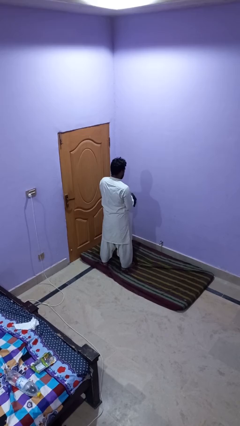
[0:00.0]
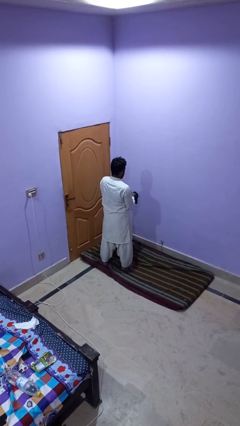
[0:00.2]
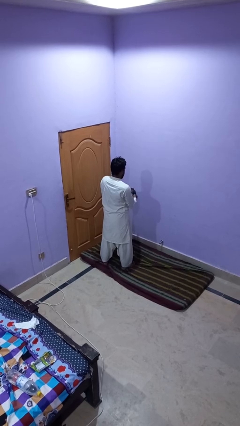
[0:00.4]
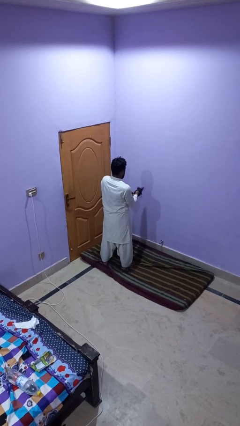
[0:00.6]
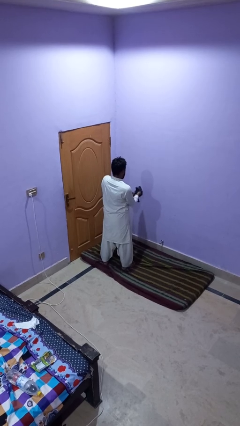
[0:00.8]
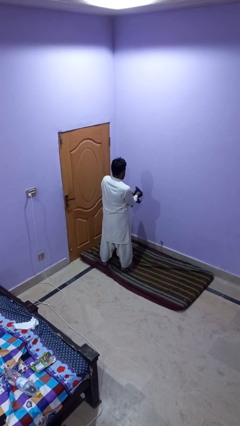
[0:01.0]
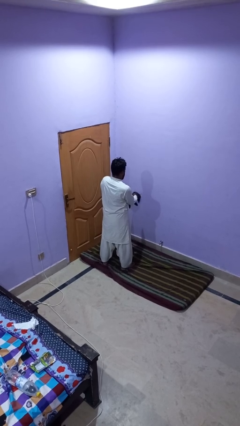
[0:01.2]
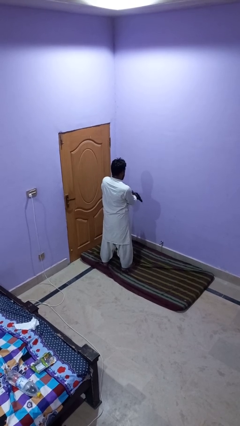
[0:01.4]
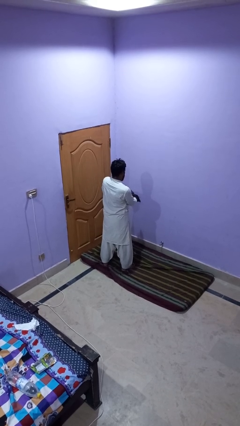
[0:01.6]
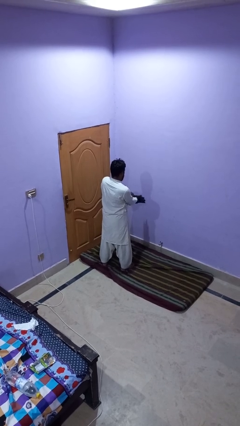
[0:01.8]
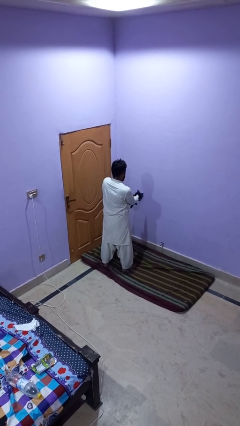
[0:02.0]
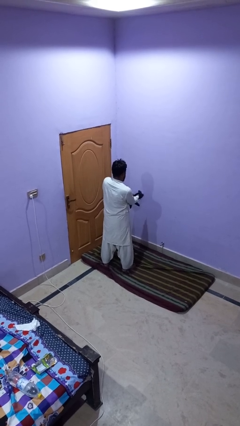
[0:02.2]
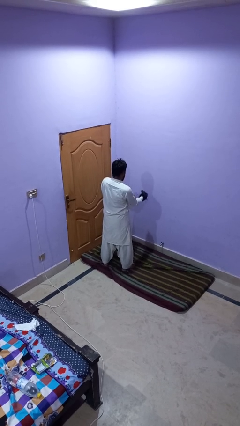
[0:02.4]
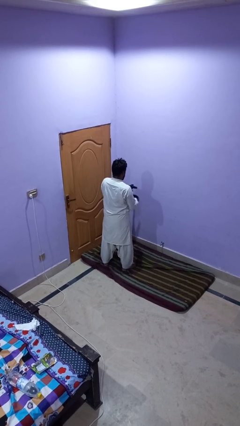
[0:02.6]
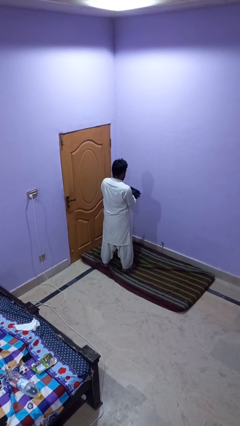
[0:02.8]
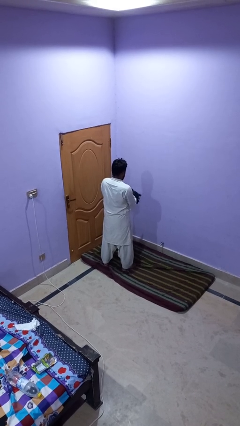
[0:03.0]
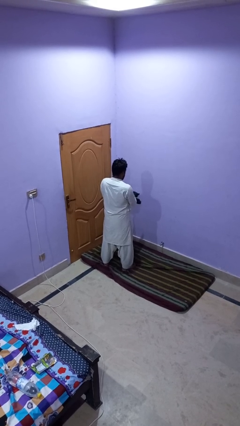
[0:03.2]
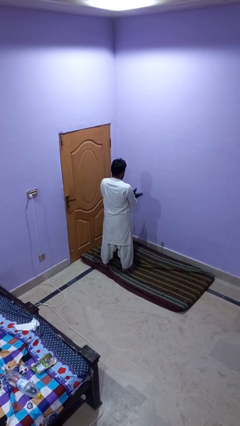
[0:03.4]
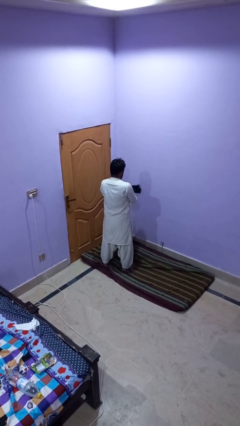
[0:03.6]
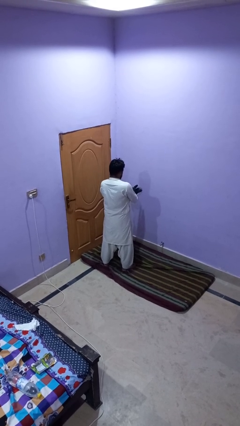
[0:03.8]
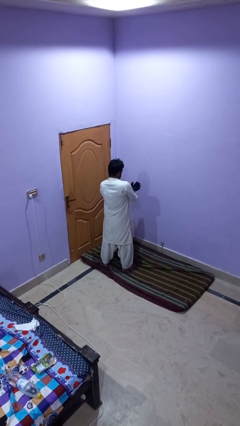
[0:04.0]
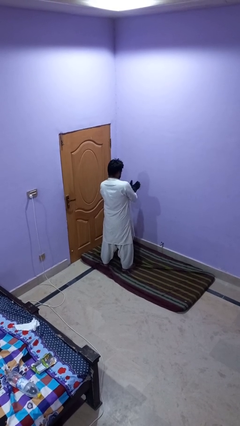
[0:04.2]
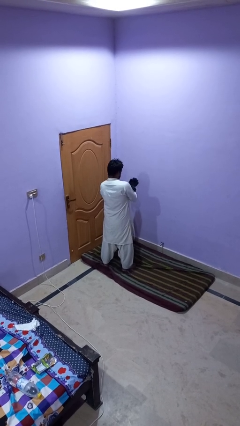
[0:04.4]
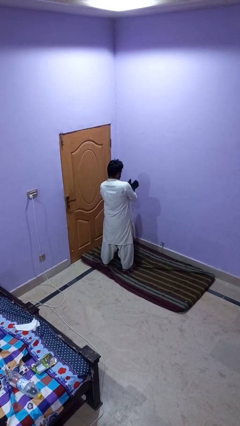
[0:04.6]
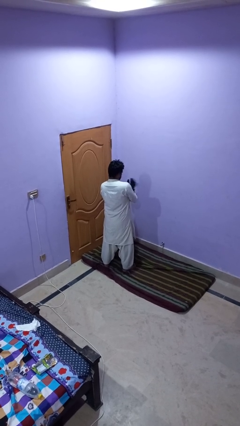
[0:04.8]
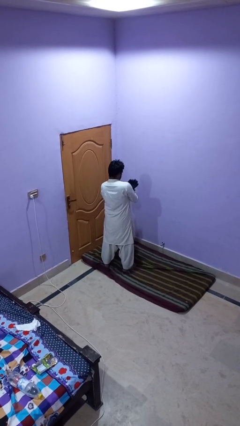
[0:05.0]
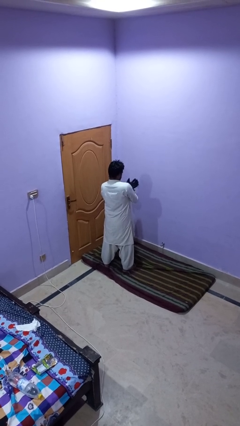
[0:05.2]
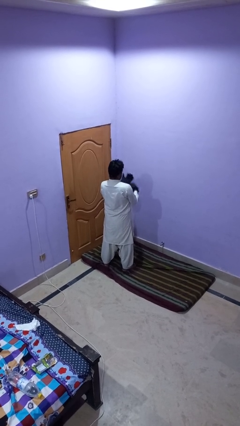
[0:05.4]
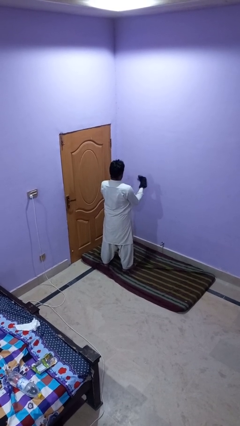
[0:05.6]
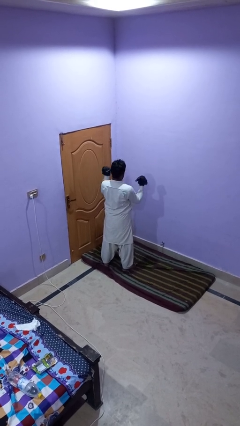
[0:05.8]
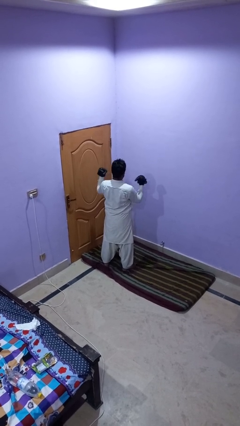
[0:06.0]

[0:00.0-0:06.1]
person puts on gloves

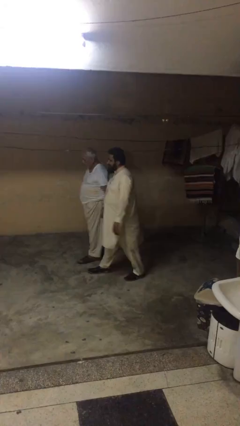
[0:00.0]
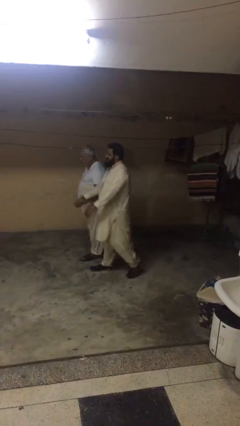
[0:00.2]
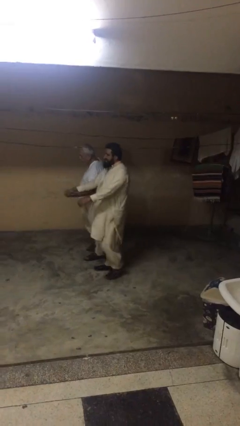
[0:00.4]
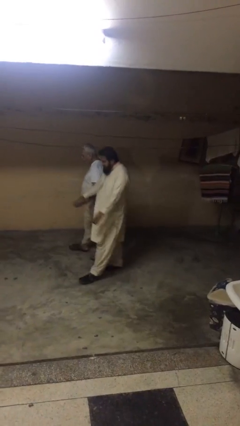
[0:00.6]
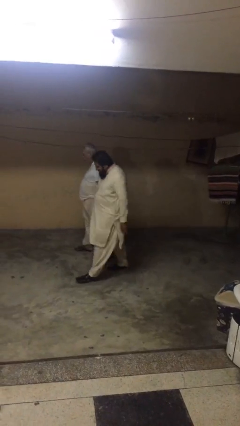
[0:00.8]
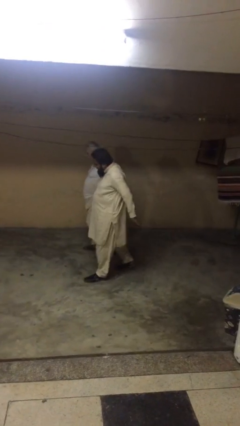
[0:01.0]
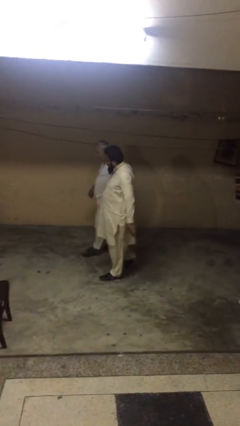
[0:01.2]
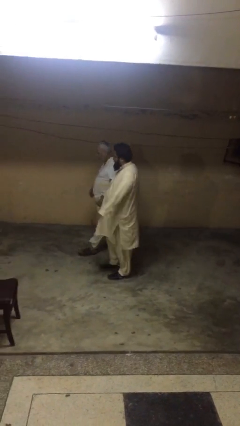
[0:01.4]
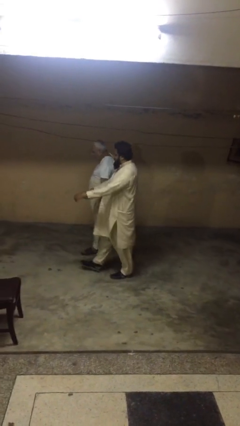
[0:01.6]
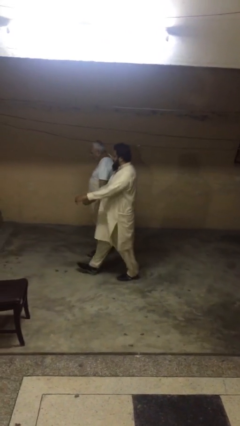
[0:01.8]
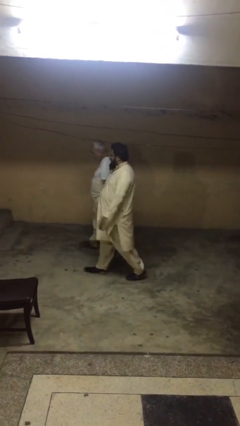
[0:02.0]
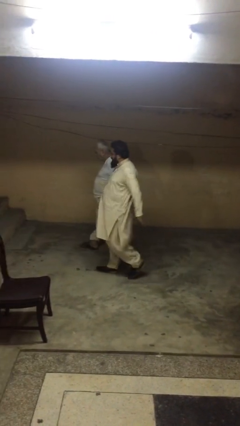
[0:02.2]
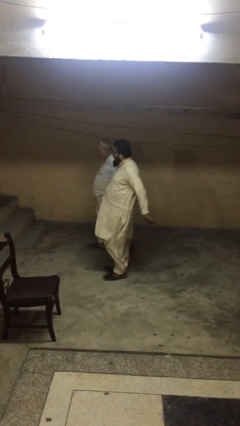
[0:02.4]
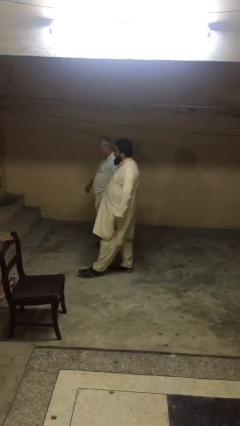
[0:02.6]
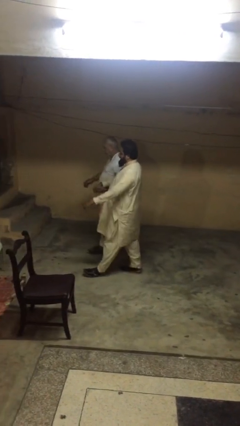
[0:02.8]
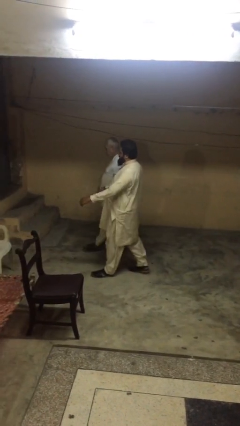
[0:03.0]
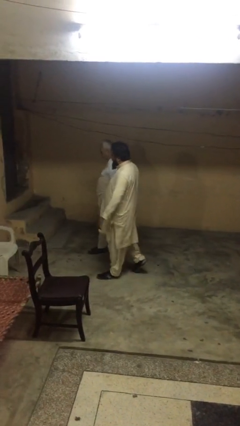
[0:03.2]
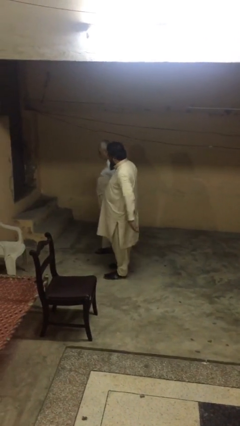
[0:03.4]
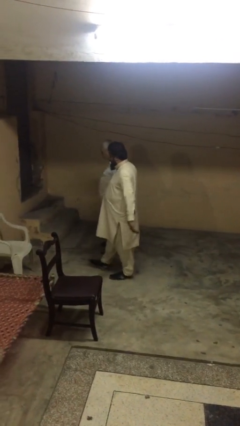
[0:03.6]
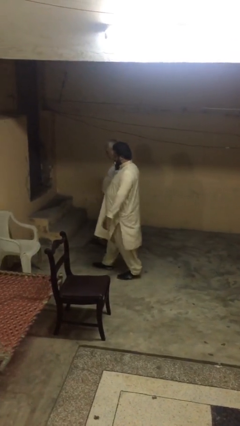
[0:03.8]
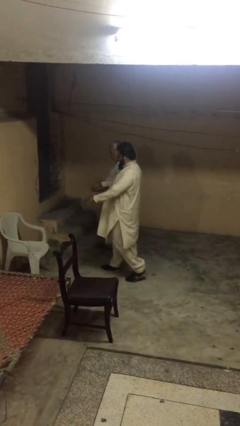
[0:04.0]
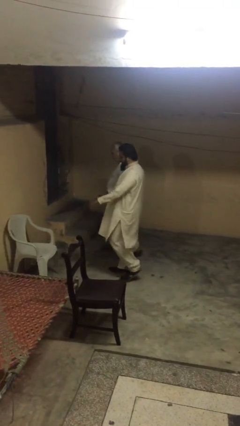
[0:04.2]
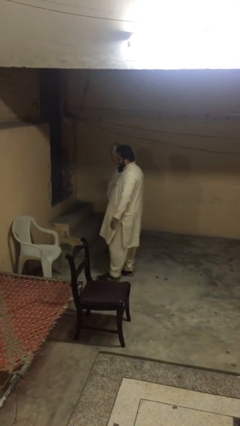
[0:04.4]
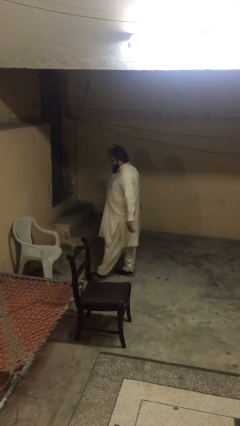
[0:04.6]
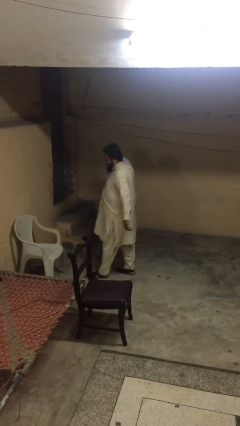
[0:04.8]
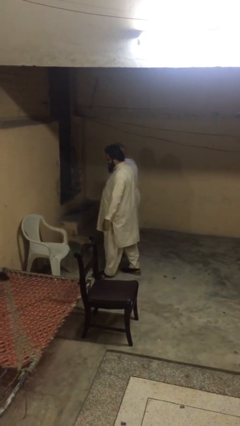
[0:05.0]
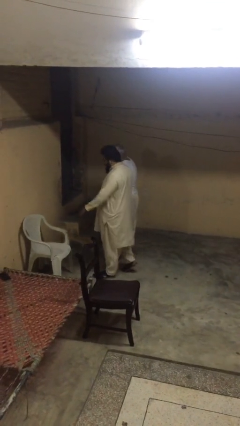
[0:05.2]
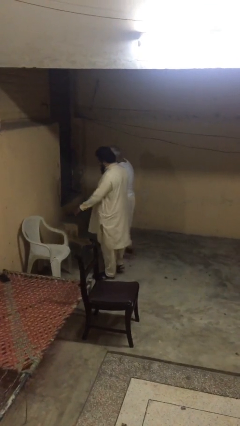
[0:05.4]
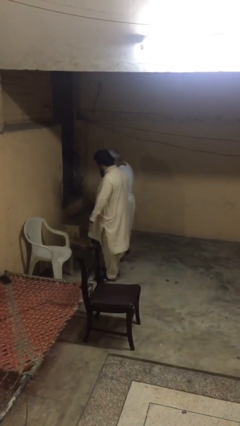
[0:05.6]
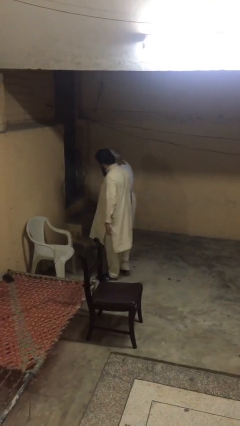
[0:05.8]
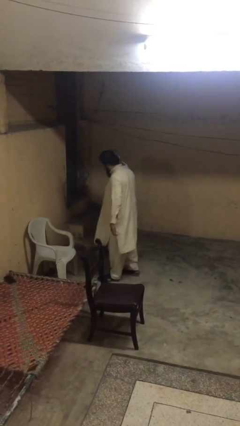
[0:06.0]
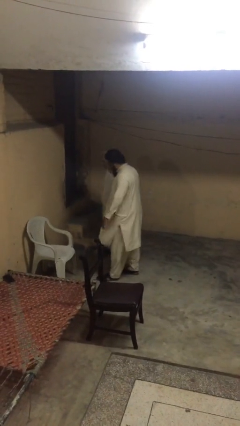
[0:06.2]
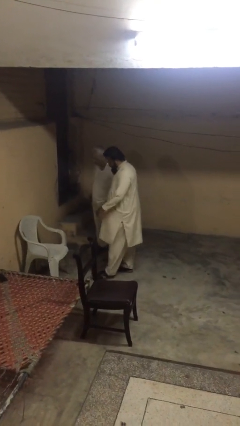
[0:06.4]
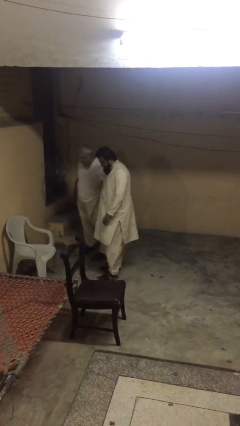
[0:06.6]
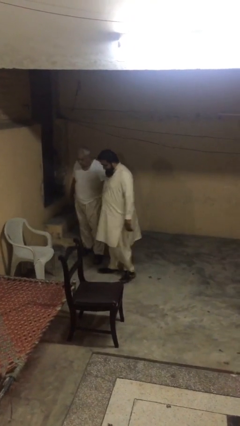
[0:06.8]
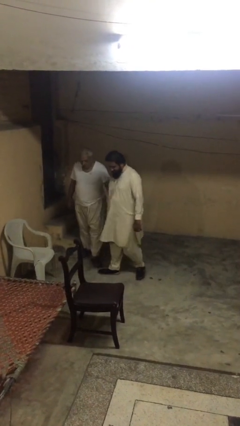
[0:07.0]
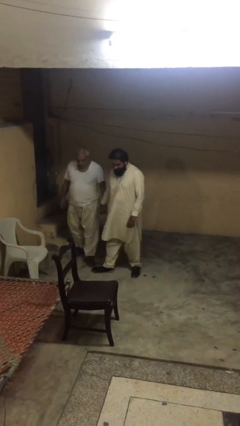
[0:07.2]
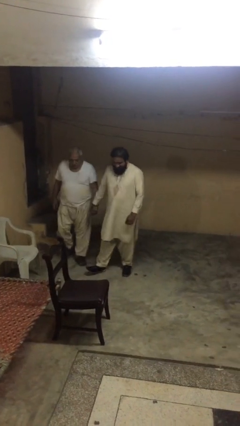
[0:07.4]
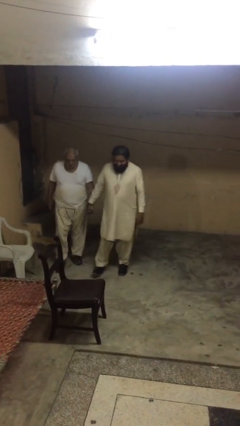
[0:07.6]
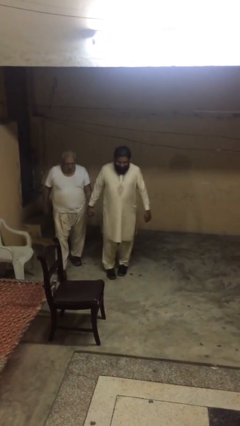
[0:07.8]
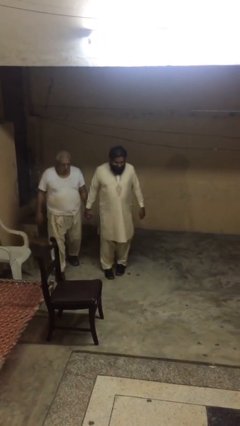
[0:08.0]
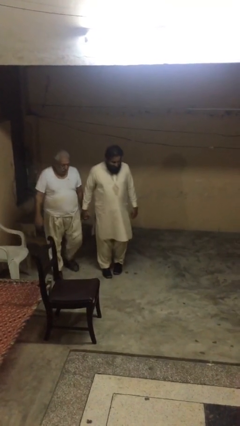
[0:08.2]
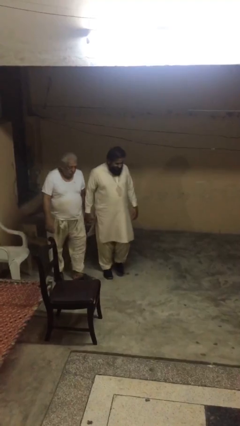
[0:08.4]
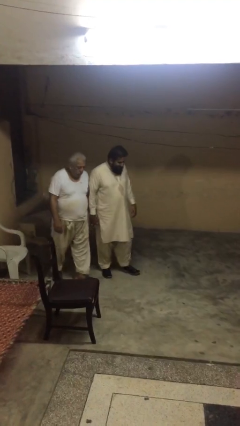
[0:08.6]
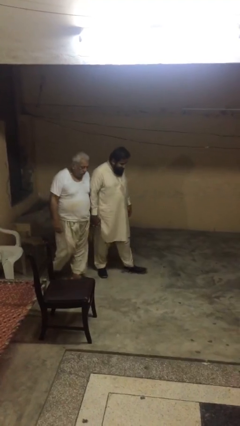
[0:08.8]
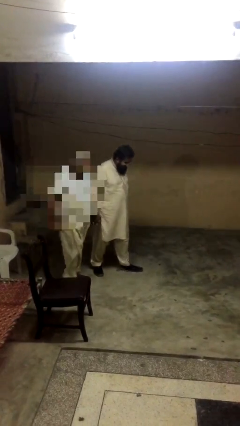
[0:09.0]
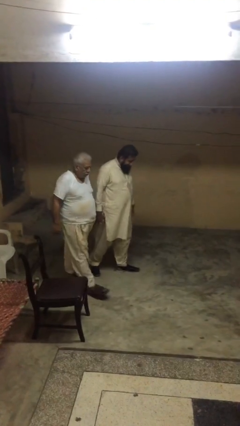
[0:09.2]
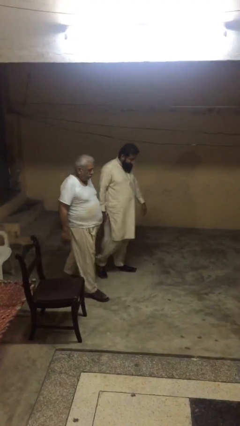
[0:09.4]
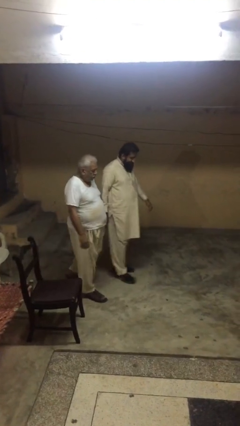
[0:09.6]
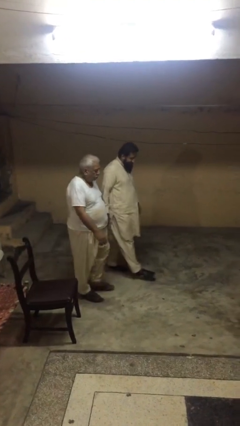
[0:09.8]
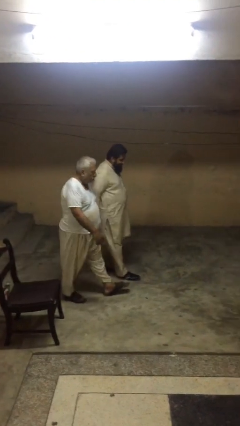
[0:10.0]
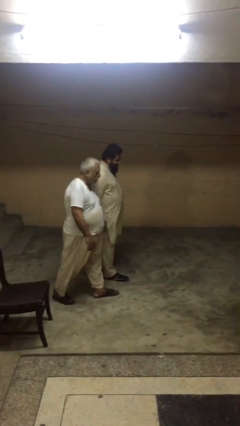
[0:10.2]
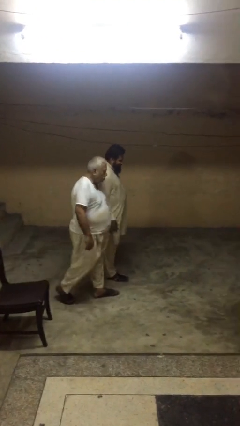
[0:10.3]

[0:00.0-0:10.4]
person holds hand

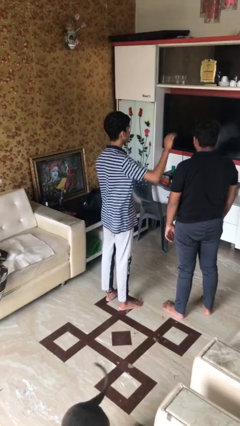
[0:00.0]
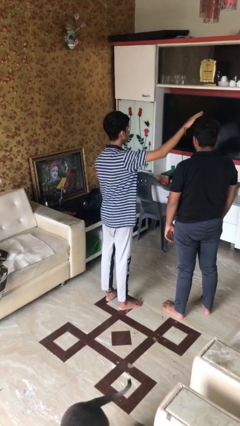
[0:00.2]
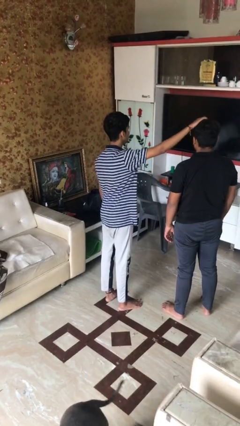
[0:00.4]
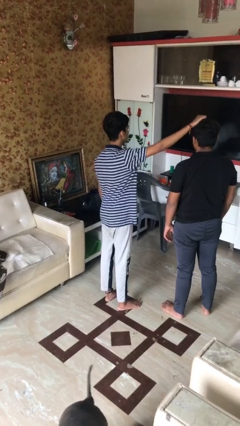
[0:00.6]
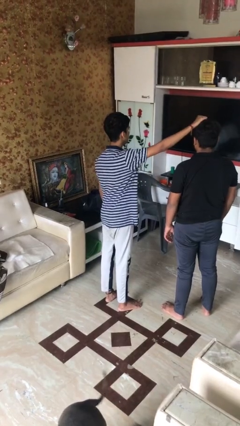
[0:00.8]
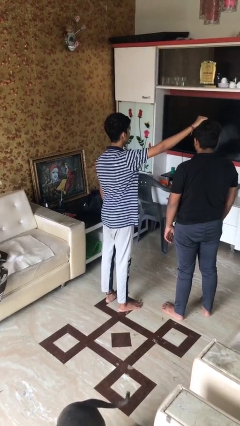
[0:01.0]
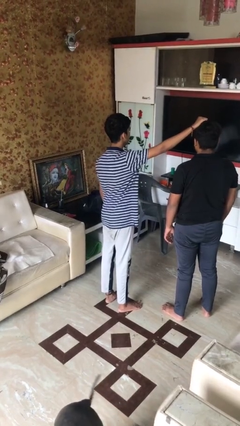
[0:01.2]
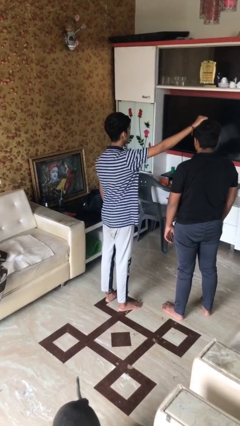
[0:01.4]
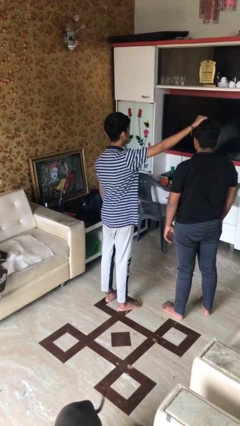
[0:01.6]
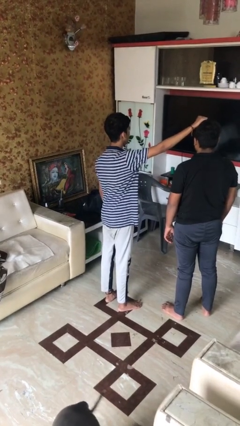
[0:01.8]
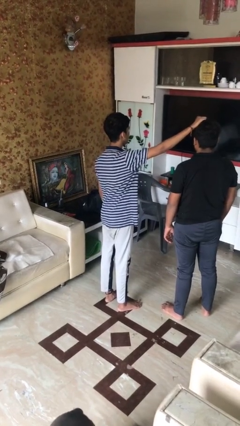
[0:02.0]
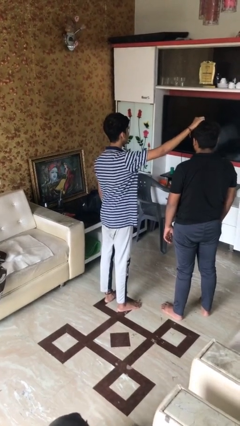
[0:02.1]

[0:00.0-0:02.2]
person grabs person by hair
